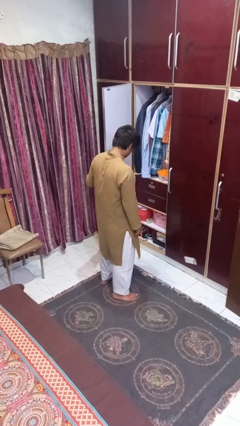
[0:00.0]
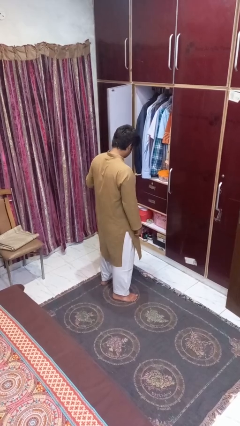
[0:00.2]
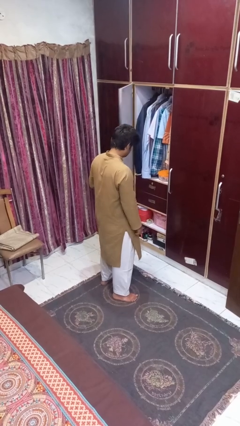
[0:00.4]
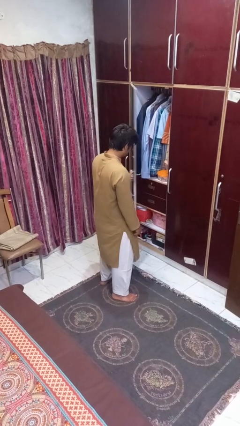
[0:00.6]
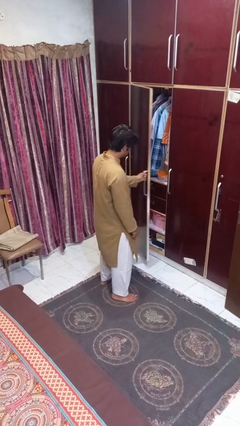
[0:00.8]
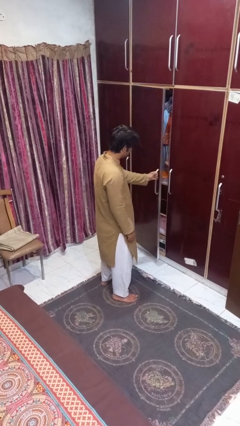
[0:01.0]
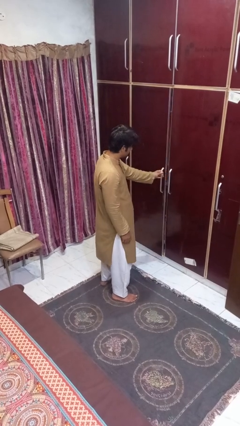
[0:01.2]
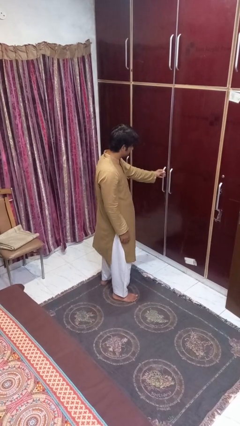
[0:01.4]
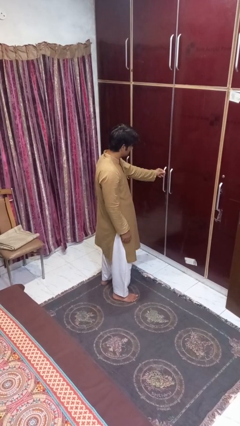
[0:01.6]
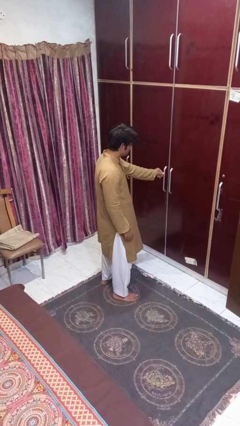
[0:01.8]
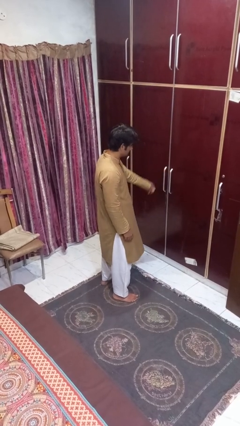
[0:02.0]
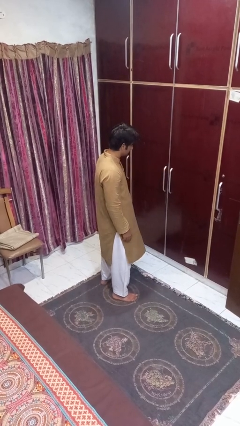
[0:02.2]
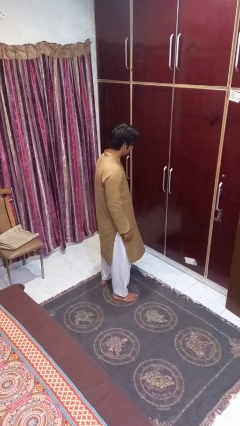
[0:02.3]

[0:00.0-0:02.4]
person closes closet door

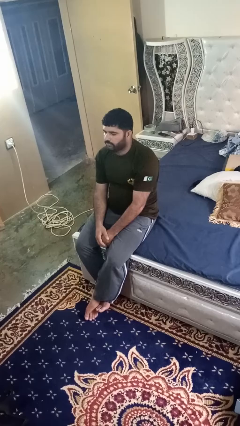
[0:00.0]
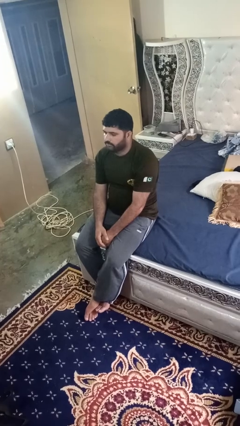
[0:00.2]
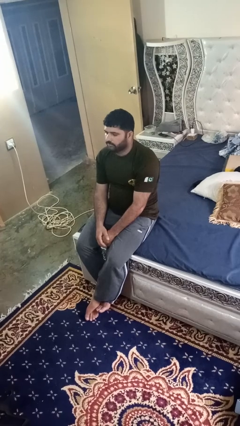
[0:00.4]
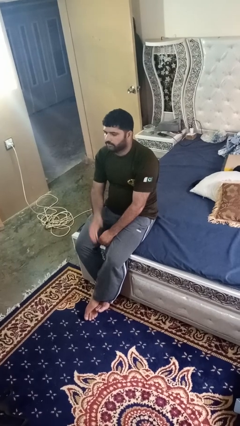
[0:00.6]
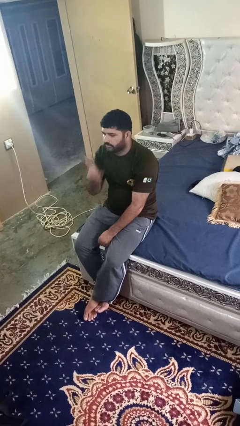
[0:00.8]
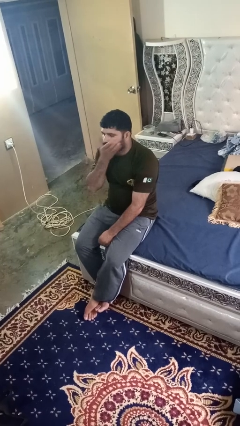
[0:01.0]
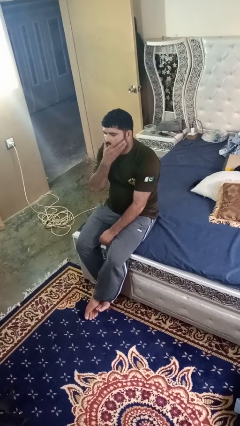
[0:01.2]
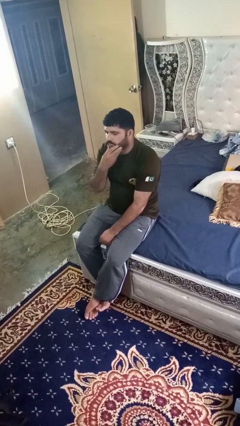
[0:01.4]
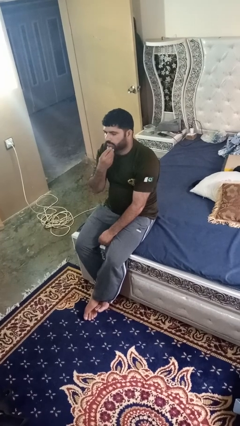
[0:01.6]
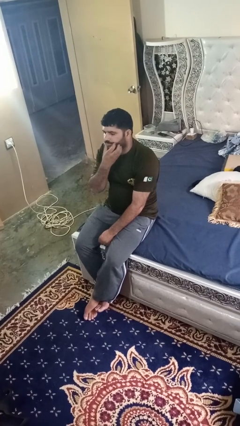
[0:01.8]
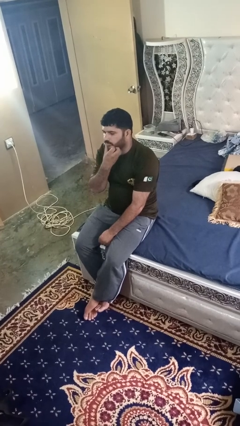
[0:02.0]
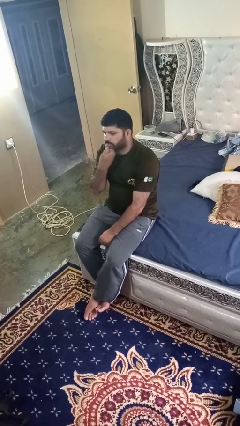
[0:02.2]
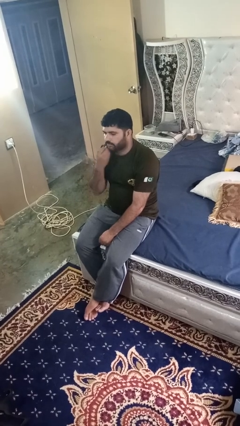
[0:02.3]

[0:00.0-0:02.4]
person strokes chin

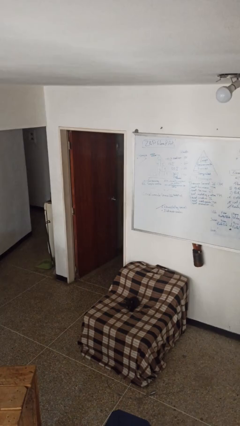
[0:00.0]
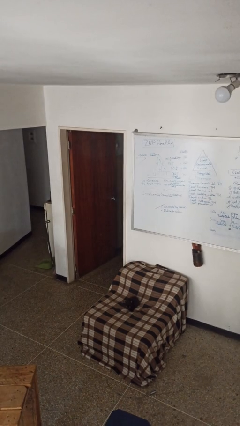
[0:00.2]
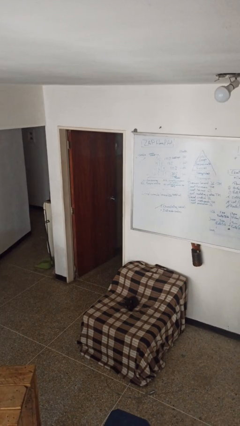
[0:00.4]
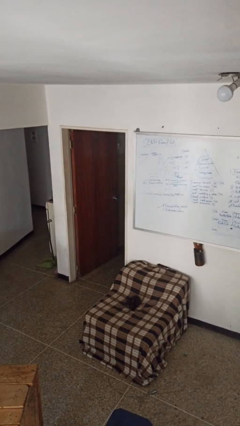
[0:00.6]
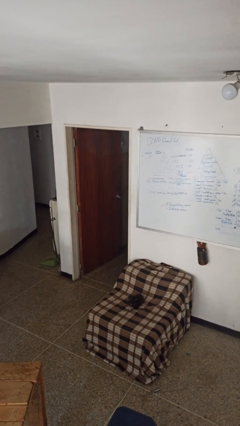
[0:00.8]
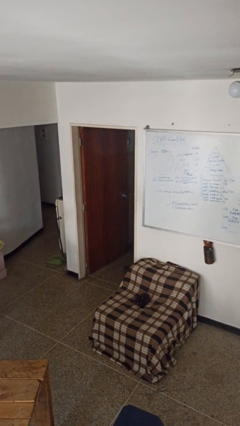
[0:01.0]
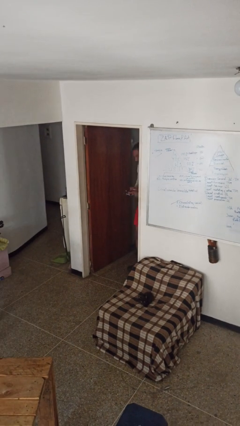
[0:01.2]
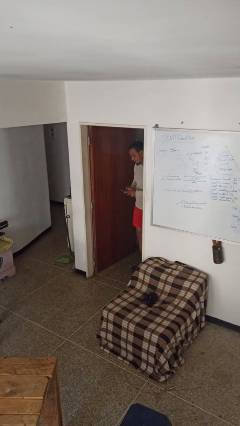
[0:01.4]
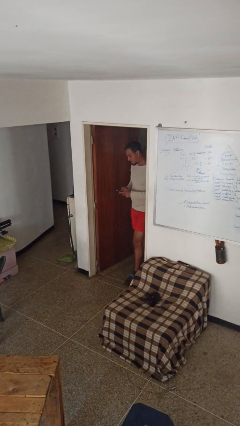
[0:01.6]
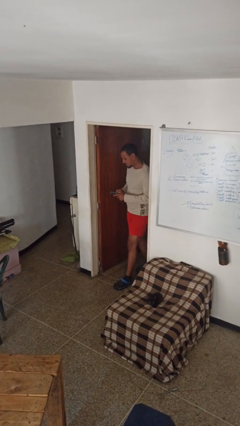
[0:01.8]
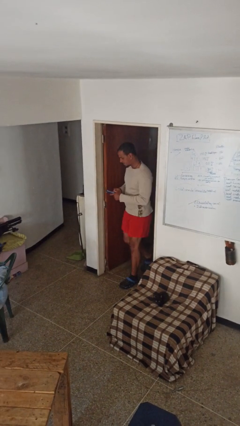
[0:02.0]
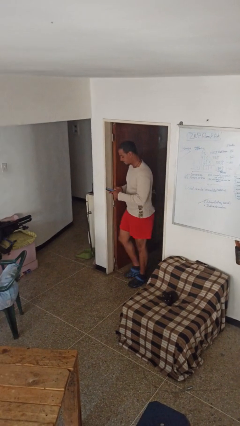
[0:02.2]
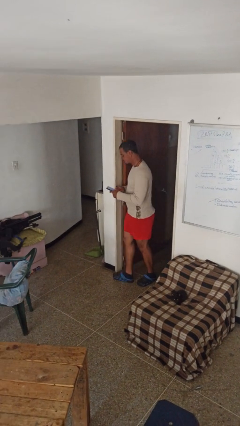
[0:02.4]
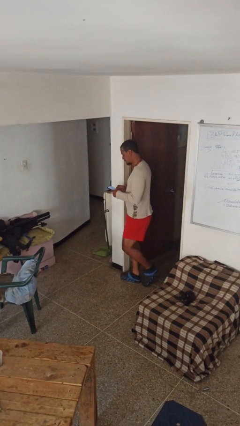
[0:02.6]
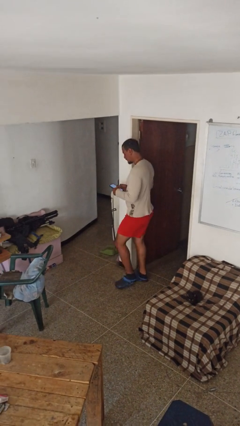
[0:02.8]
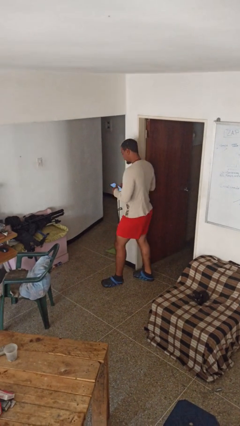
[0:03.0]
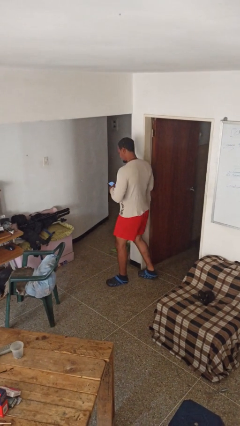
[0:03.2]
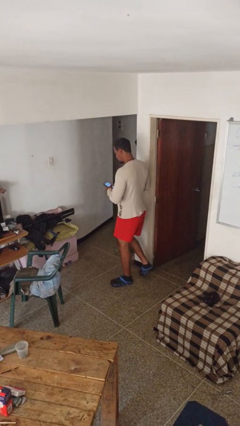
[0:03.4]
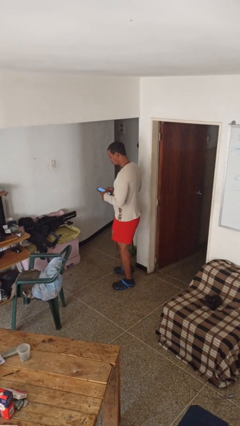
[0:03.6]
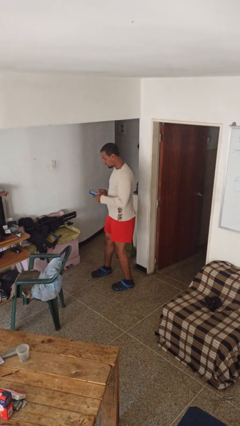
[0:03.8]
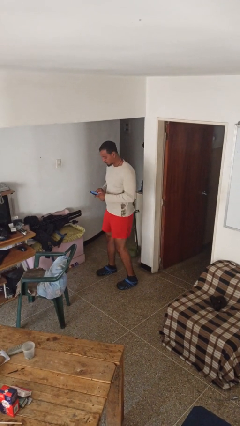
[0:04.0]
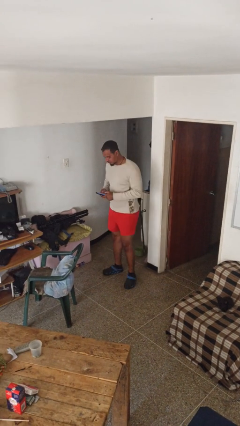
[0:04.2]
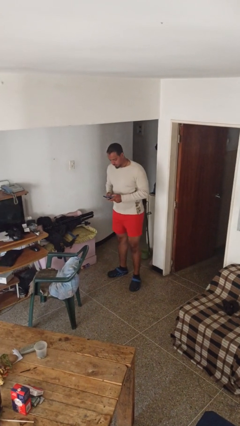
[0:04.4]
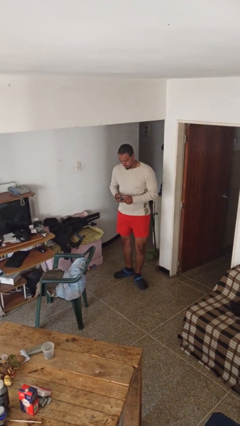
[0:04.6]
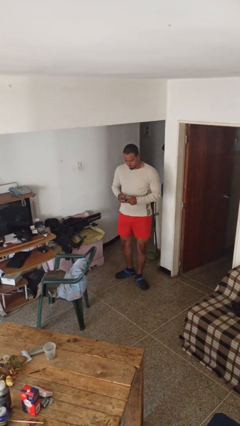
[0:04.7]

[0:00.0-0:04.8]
person enters scene through structure

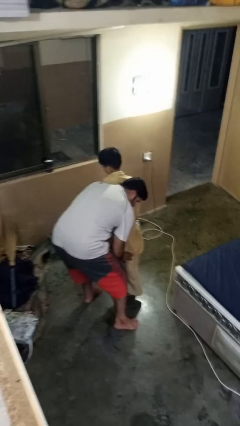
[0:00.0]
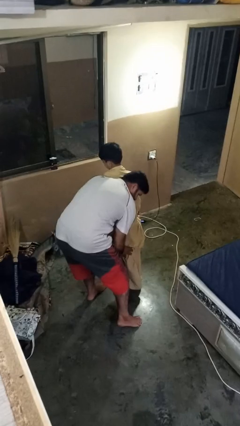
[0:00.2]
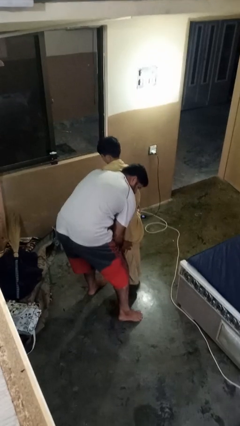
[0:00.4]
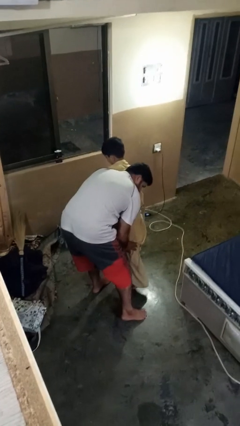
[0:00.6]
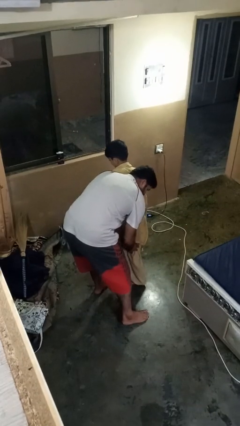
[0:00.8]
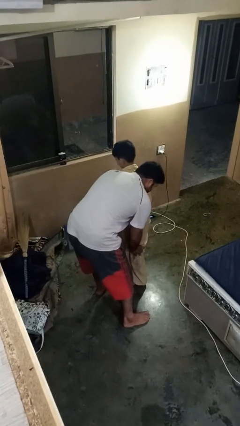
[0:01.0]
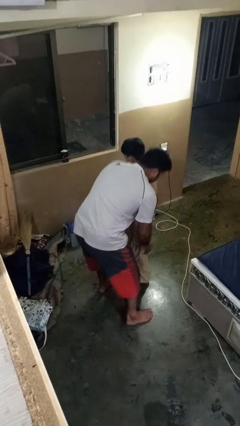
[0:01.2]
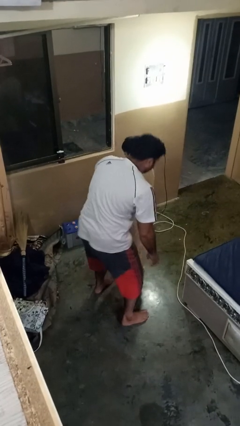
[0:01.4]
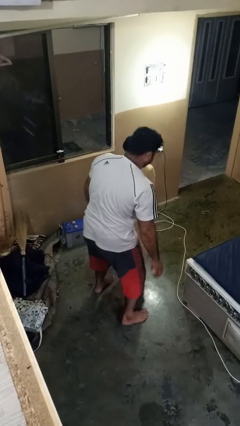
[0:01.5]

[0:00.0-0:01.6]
person puts down person

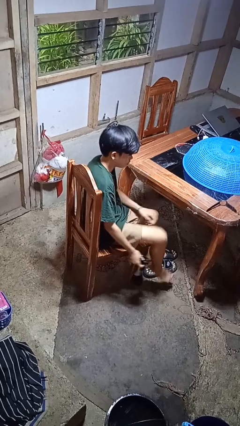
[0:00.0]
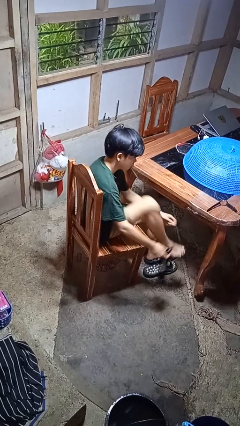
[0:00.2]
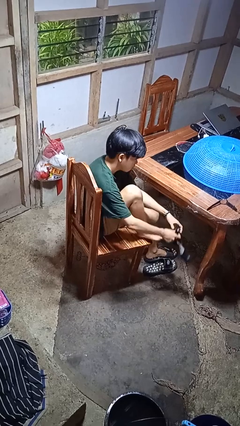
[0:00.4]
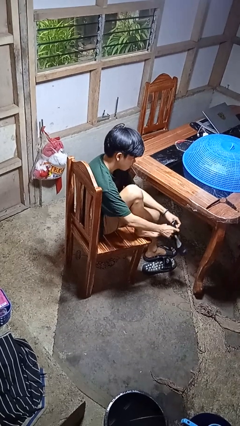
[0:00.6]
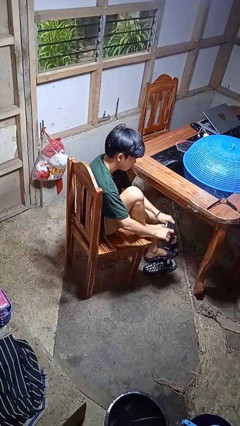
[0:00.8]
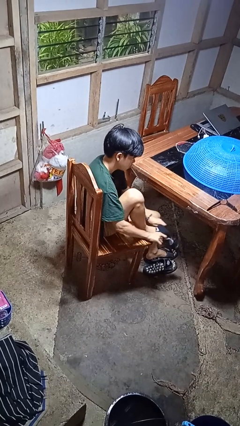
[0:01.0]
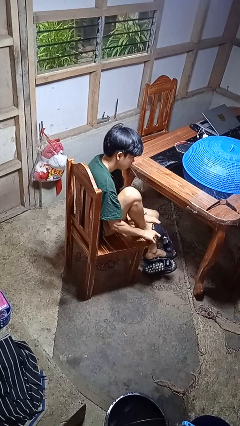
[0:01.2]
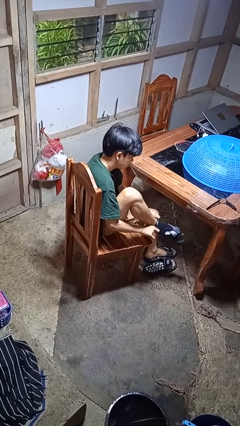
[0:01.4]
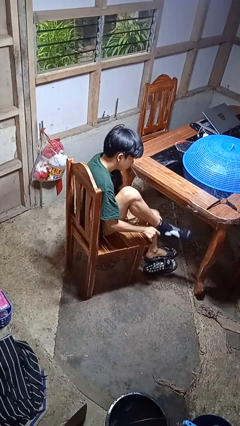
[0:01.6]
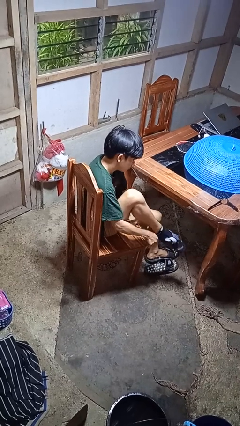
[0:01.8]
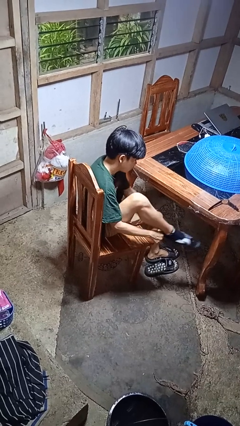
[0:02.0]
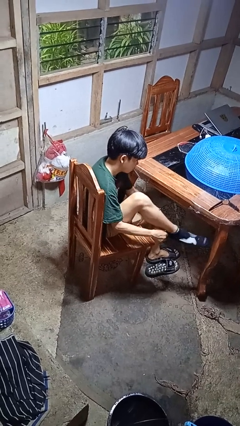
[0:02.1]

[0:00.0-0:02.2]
person puts on socks

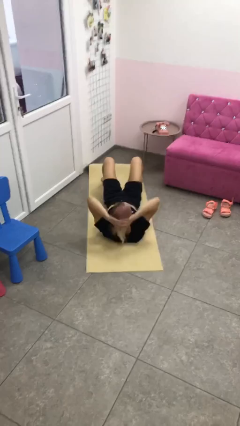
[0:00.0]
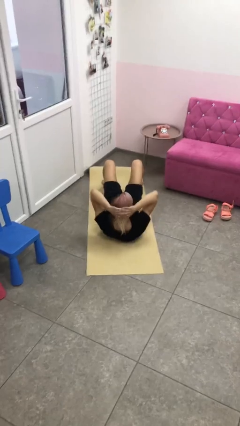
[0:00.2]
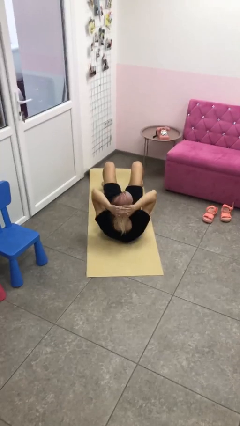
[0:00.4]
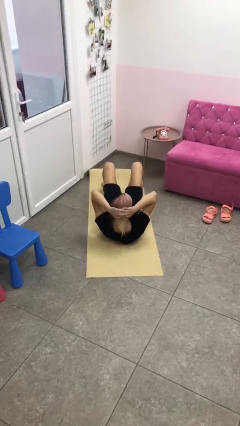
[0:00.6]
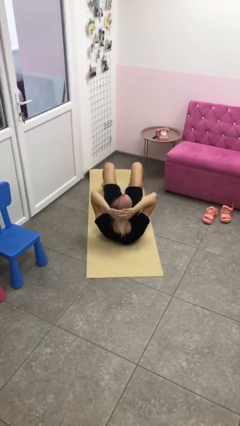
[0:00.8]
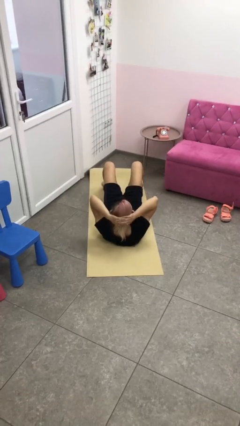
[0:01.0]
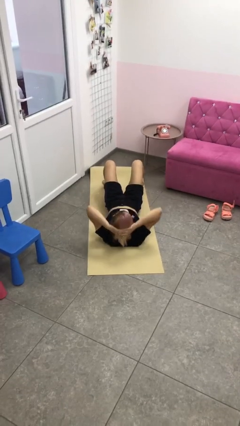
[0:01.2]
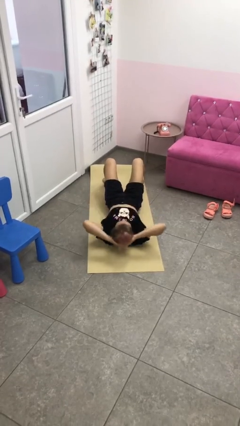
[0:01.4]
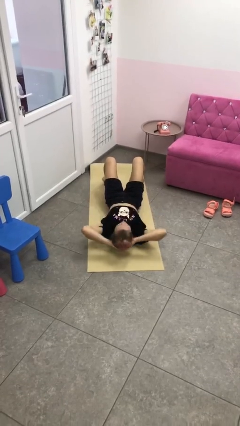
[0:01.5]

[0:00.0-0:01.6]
person exercises with situp

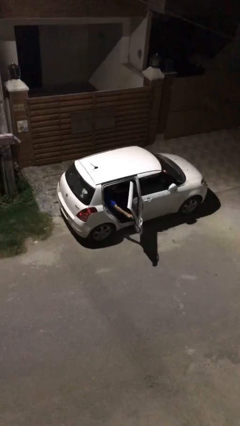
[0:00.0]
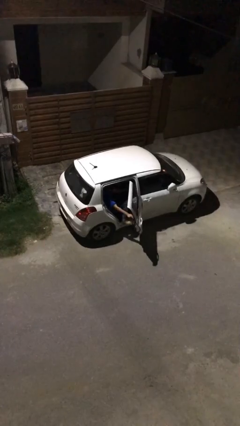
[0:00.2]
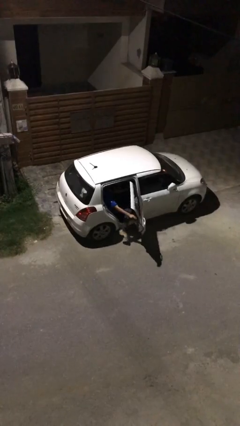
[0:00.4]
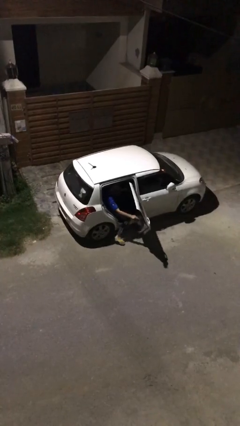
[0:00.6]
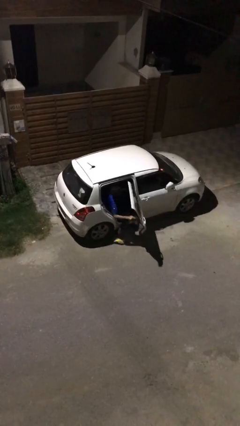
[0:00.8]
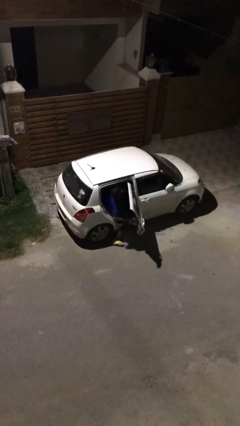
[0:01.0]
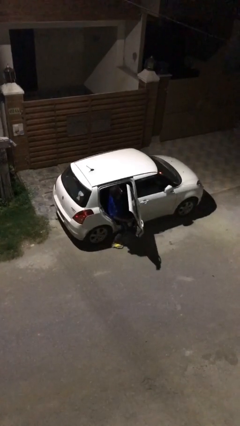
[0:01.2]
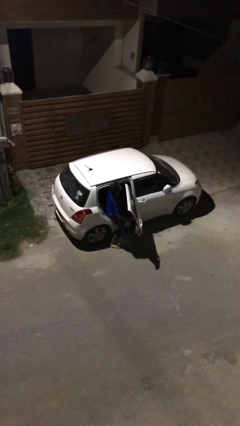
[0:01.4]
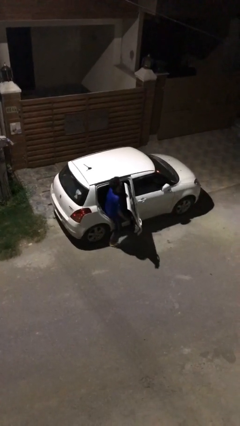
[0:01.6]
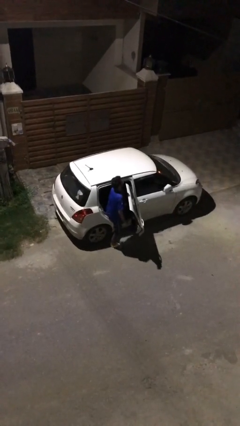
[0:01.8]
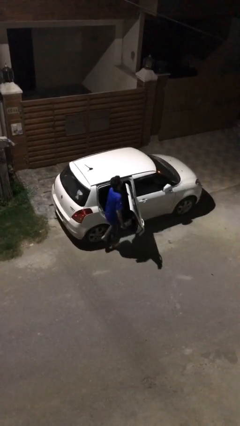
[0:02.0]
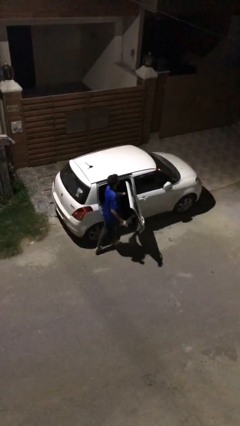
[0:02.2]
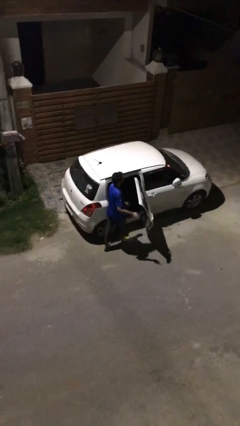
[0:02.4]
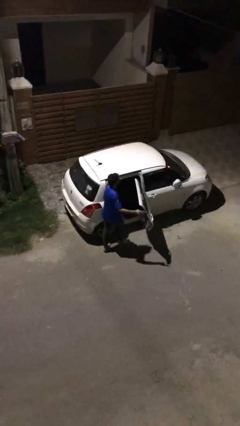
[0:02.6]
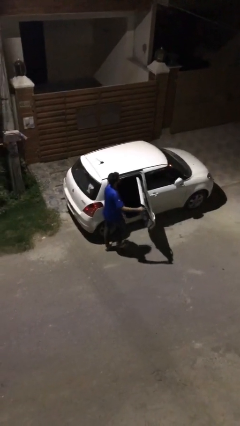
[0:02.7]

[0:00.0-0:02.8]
person exits car
